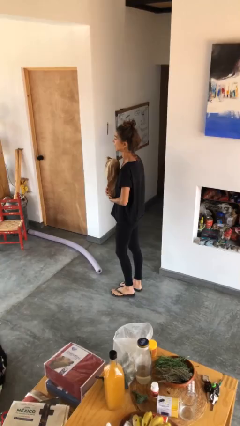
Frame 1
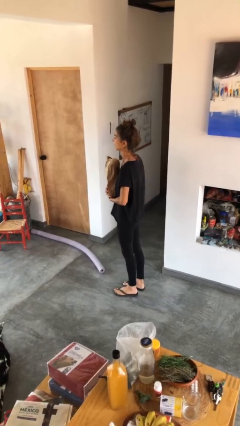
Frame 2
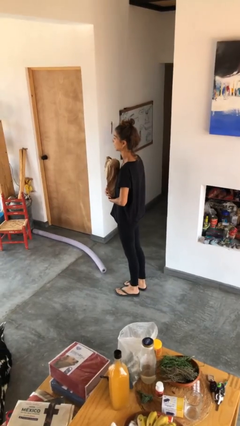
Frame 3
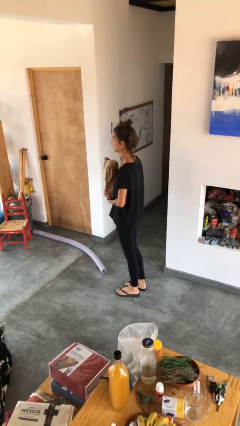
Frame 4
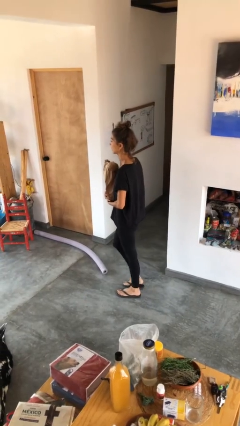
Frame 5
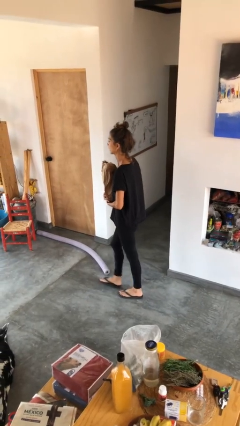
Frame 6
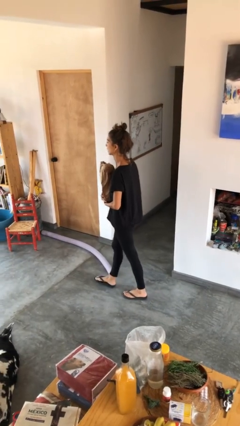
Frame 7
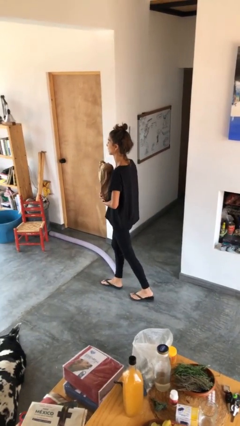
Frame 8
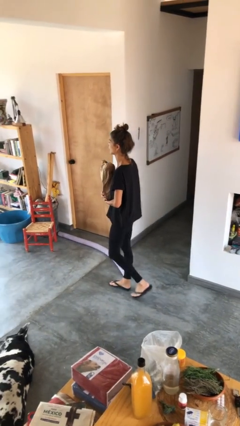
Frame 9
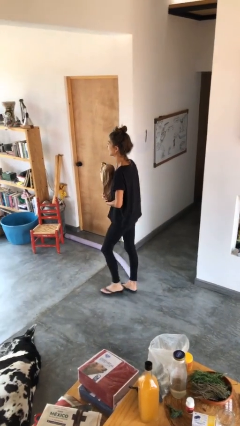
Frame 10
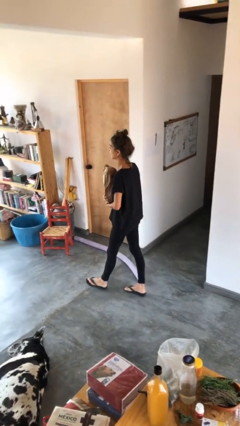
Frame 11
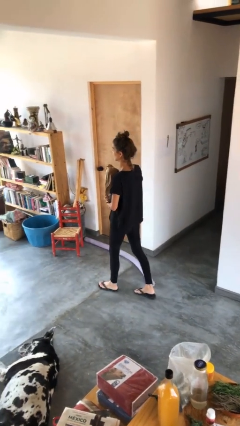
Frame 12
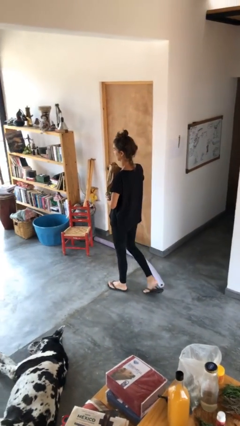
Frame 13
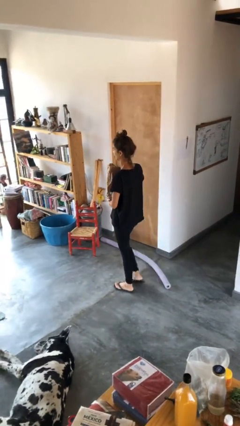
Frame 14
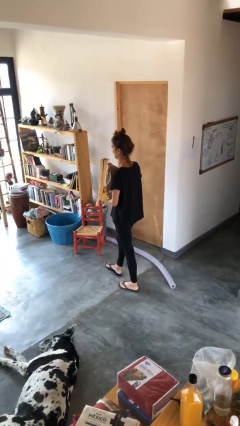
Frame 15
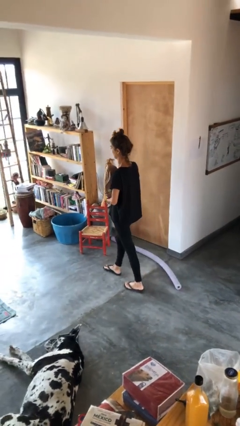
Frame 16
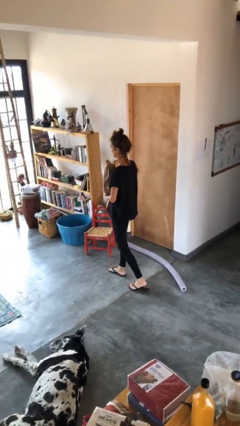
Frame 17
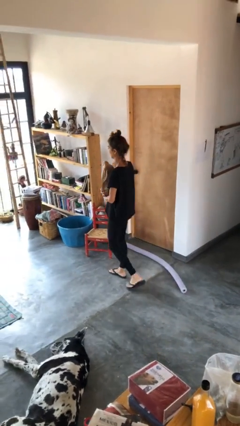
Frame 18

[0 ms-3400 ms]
person carries groceries

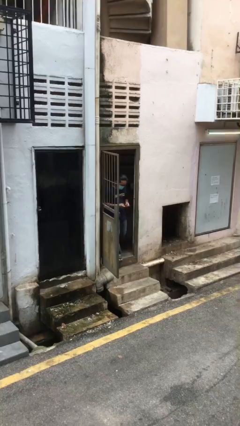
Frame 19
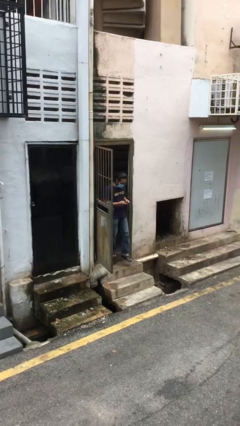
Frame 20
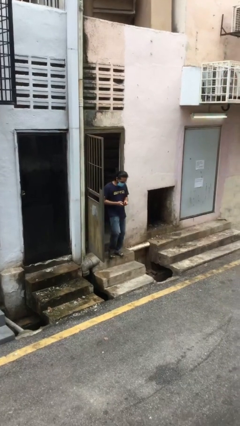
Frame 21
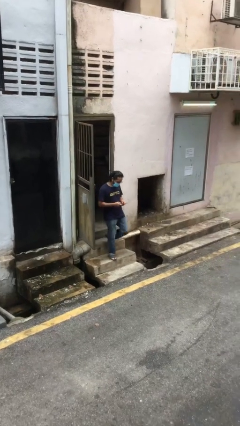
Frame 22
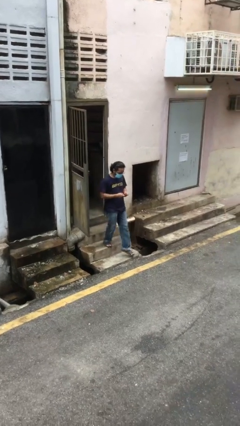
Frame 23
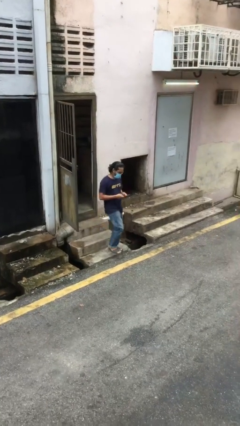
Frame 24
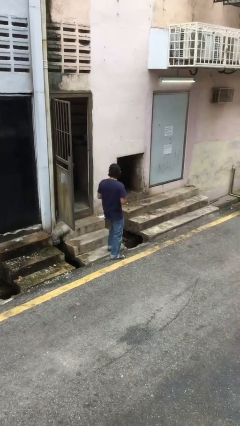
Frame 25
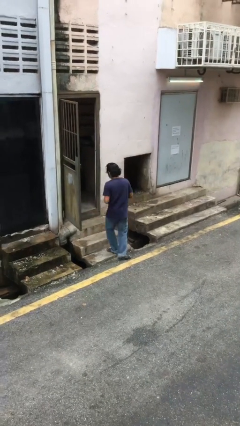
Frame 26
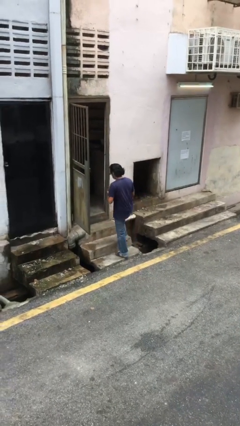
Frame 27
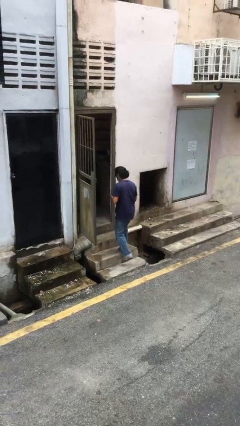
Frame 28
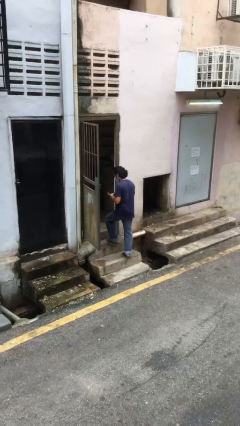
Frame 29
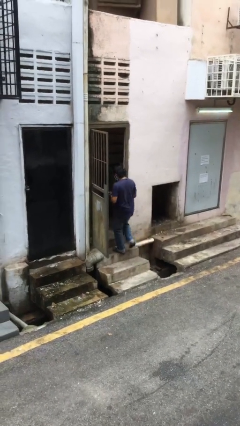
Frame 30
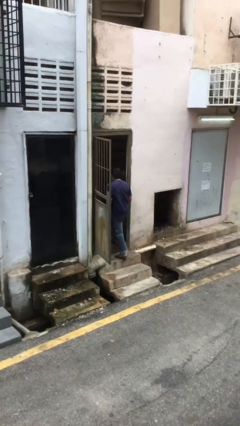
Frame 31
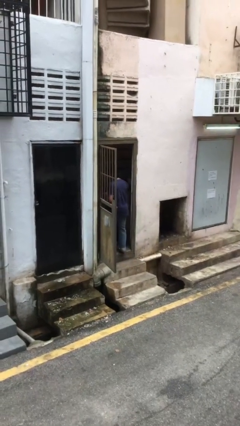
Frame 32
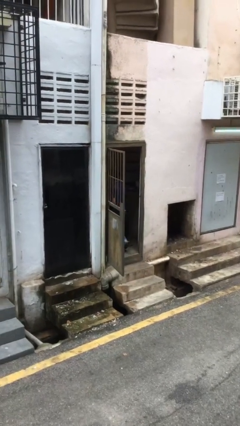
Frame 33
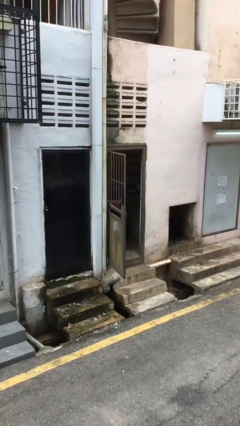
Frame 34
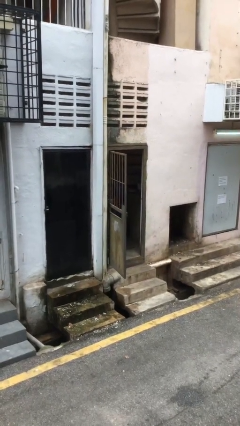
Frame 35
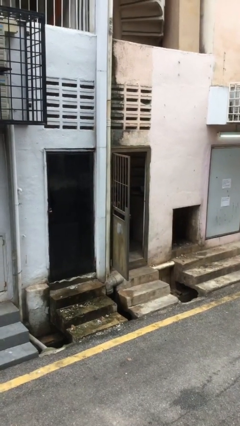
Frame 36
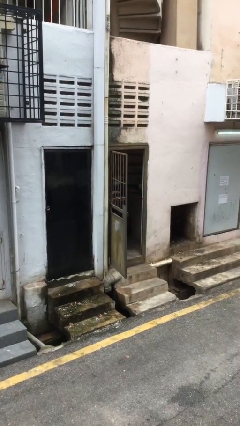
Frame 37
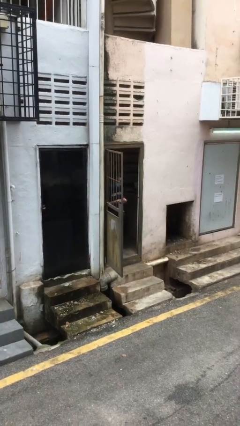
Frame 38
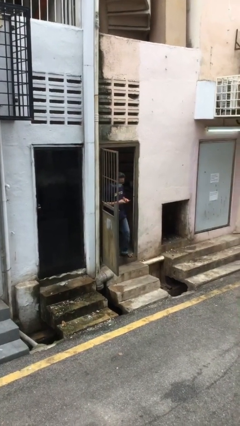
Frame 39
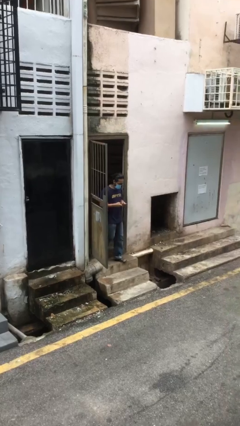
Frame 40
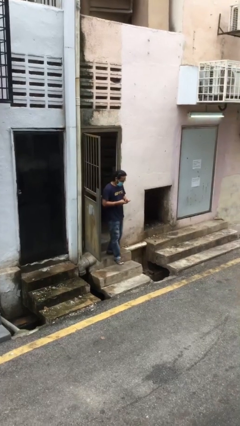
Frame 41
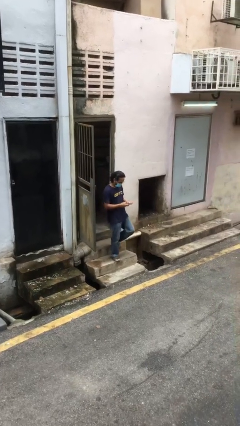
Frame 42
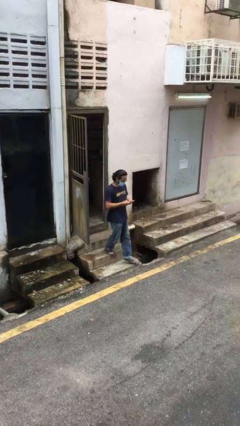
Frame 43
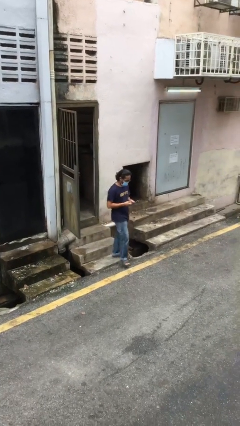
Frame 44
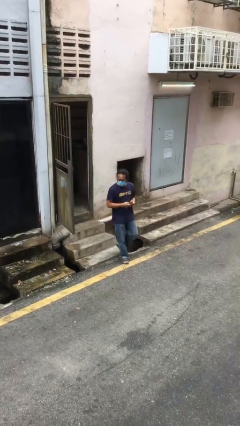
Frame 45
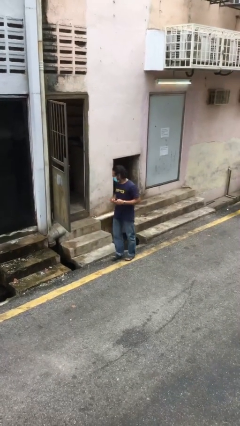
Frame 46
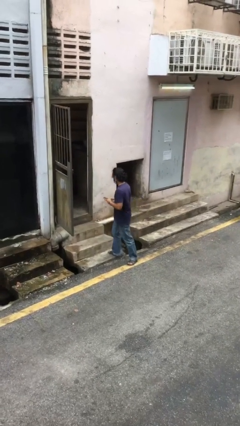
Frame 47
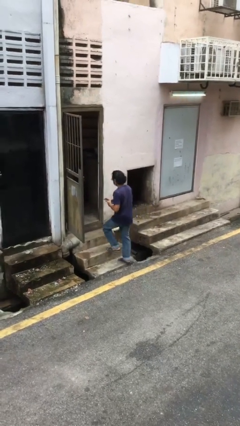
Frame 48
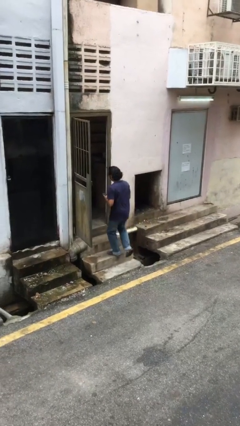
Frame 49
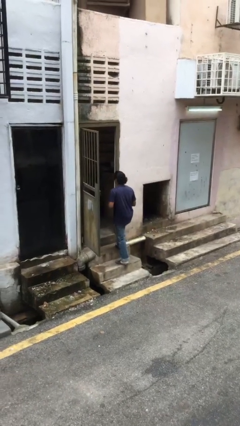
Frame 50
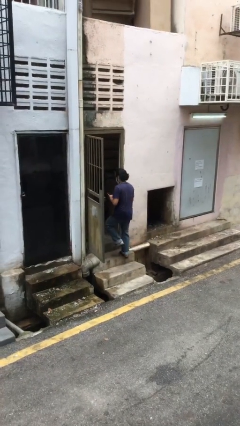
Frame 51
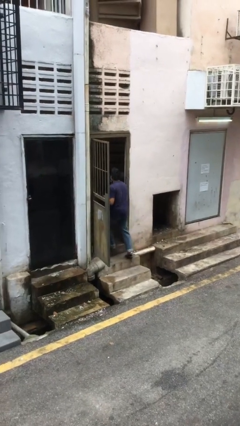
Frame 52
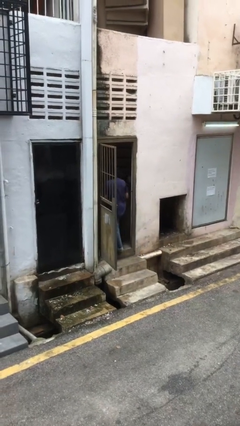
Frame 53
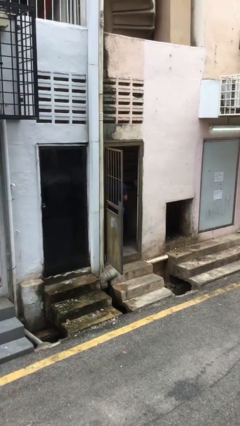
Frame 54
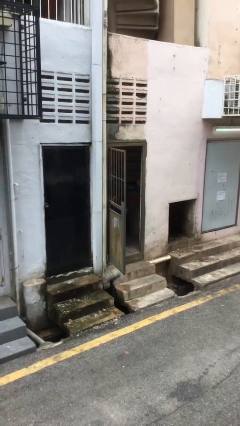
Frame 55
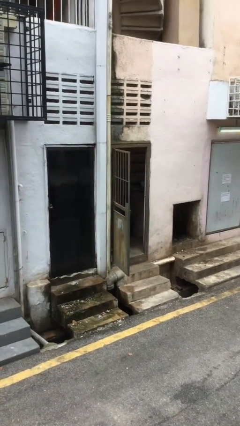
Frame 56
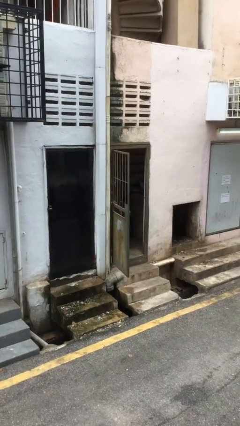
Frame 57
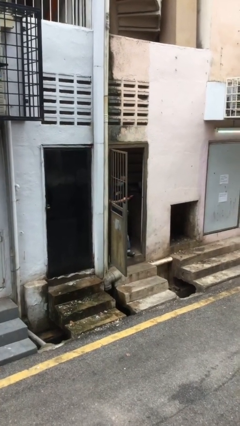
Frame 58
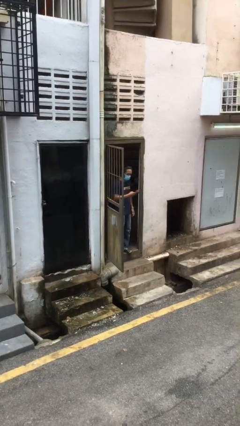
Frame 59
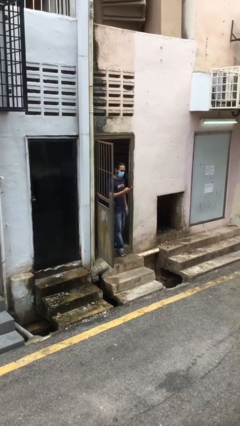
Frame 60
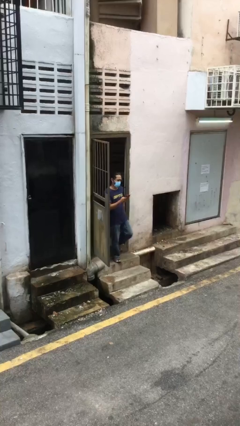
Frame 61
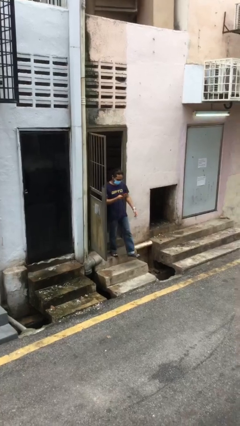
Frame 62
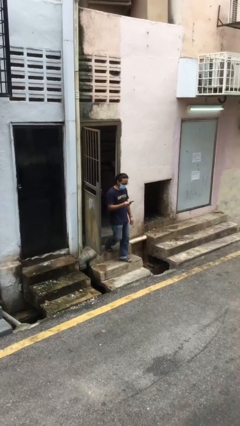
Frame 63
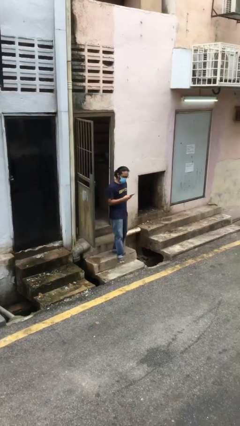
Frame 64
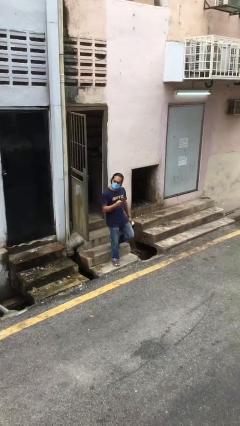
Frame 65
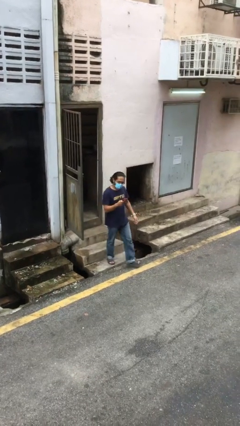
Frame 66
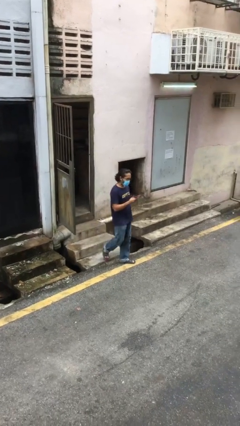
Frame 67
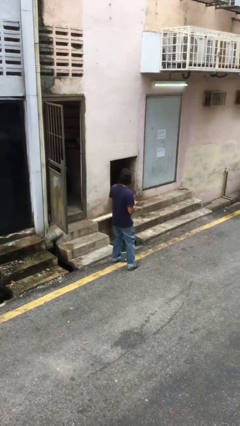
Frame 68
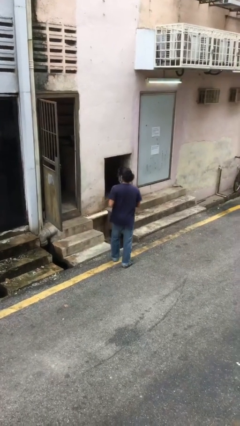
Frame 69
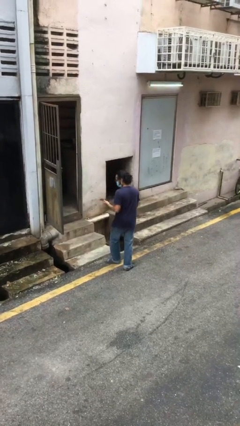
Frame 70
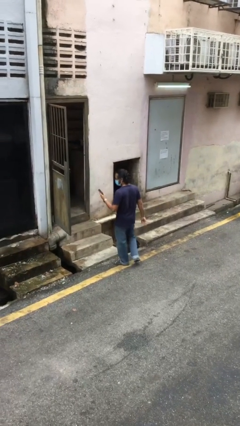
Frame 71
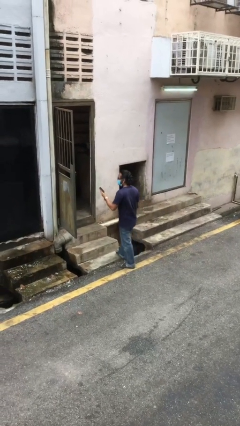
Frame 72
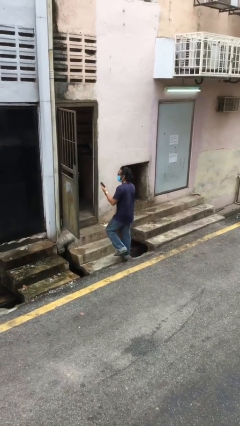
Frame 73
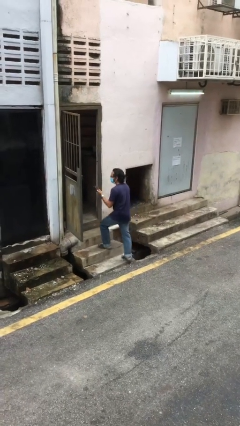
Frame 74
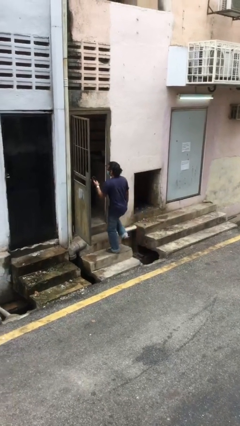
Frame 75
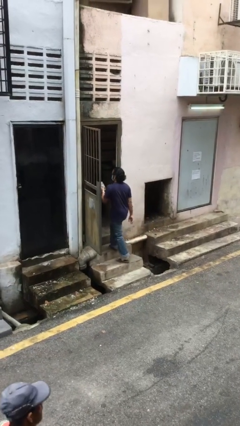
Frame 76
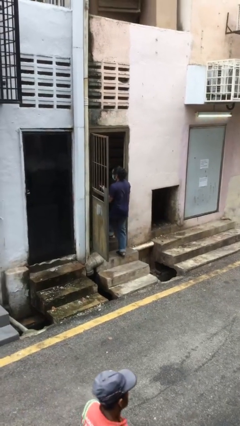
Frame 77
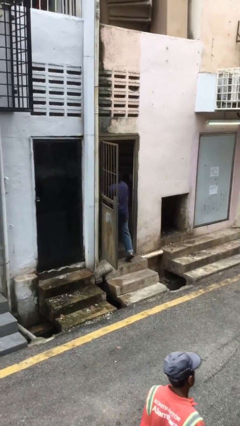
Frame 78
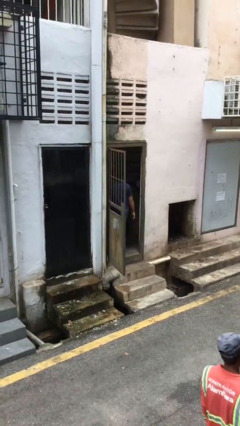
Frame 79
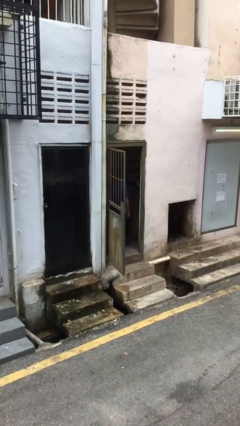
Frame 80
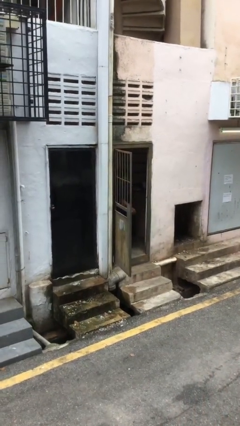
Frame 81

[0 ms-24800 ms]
person texts on phone

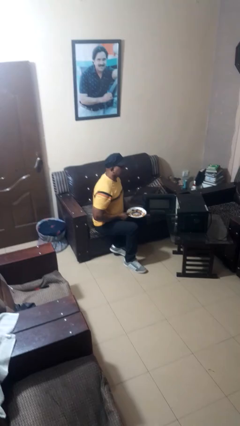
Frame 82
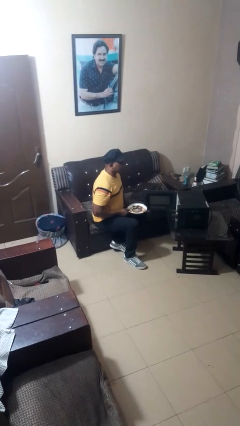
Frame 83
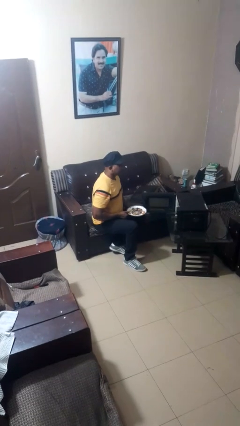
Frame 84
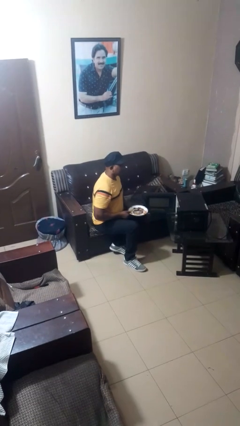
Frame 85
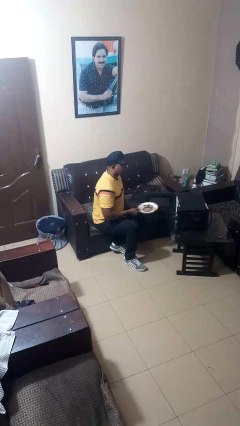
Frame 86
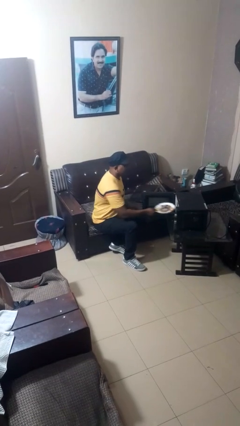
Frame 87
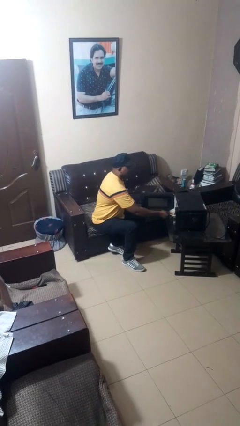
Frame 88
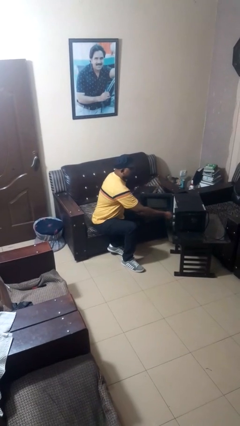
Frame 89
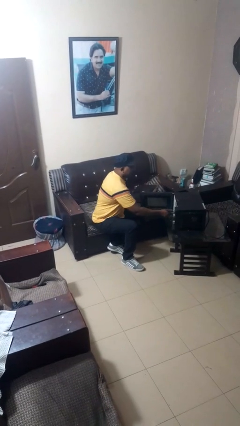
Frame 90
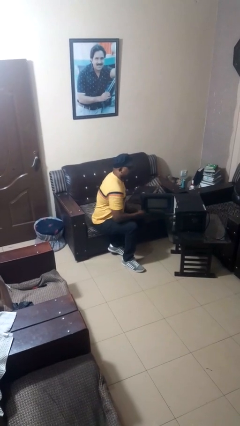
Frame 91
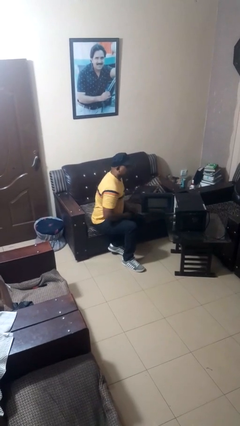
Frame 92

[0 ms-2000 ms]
person puts object into microwave

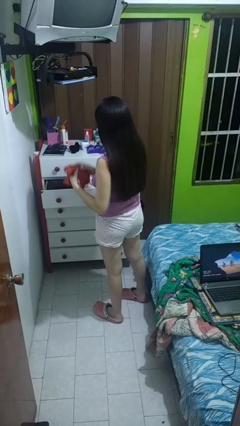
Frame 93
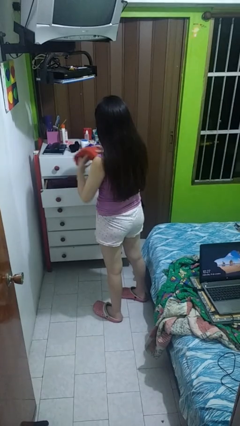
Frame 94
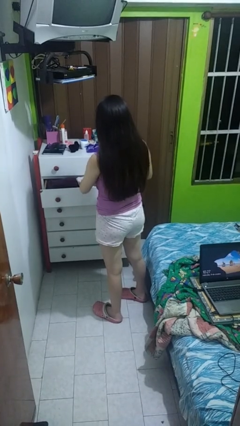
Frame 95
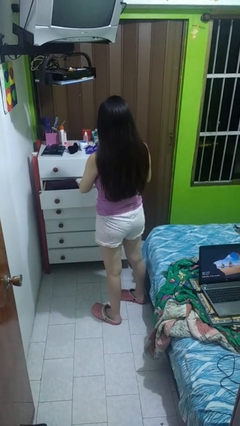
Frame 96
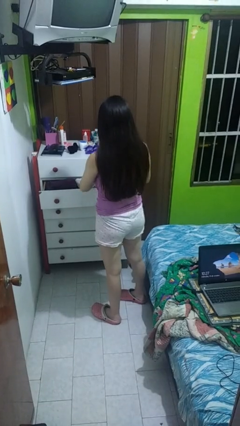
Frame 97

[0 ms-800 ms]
person puts clothes into dresser
